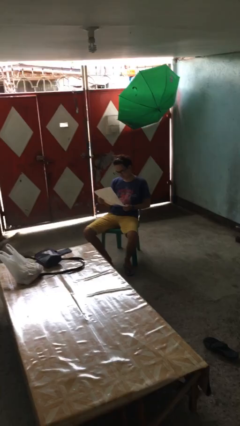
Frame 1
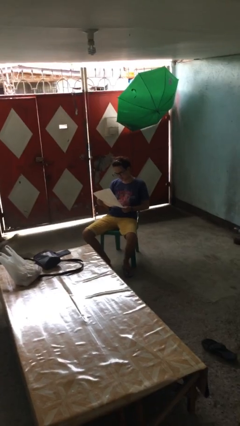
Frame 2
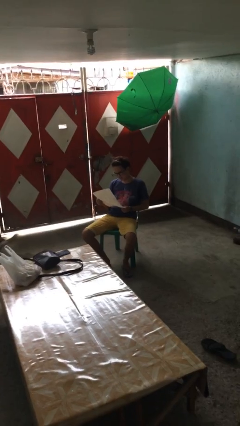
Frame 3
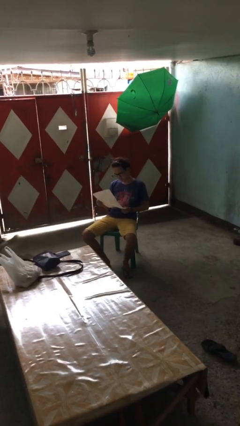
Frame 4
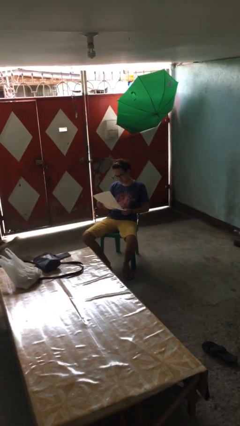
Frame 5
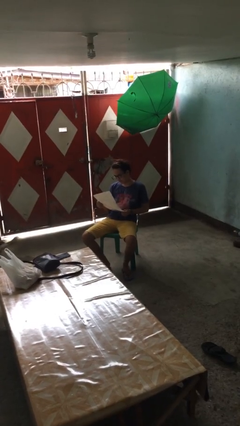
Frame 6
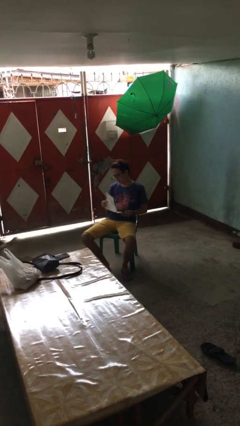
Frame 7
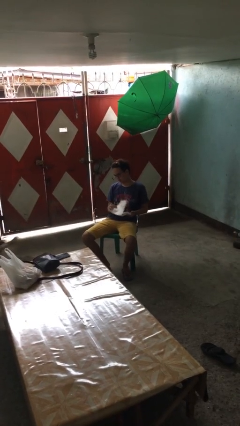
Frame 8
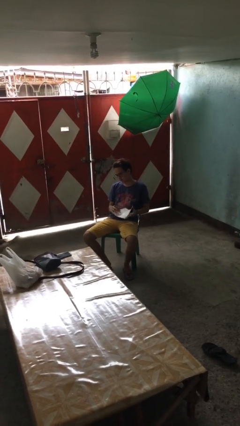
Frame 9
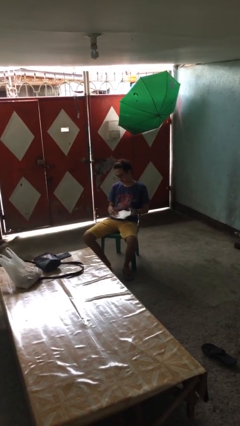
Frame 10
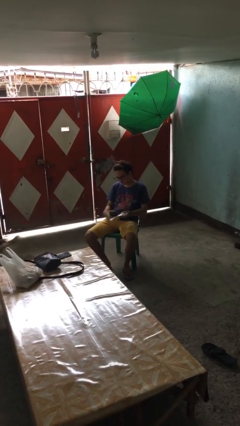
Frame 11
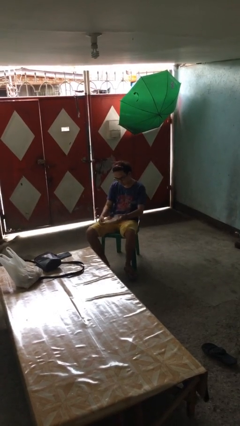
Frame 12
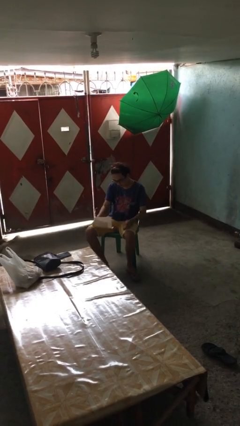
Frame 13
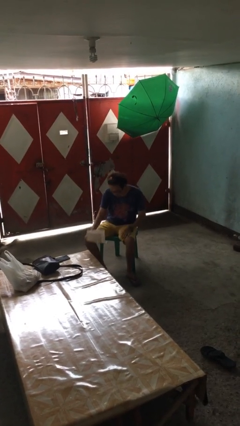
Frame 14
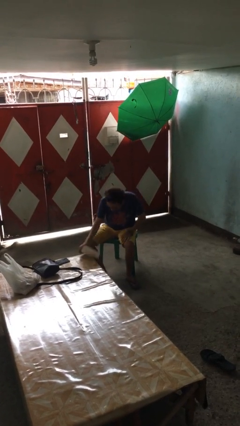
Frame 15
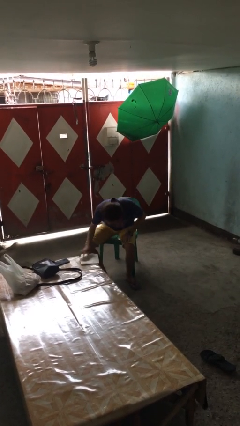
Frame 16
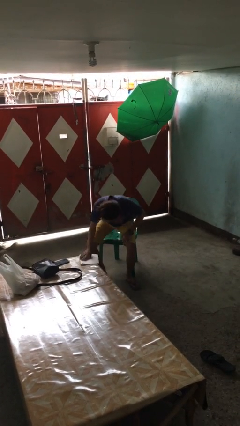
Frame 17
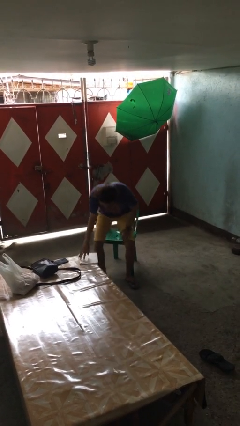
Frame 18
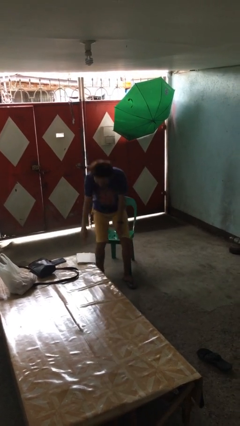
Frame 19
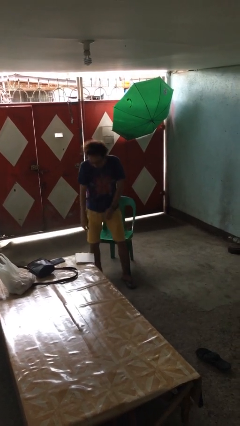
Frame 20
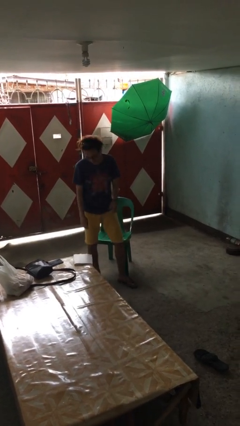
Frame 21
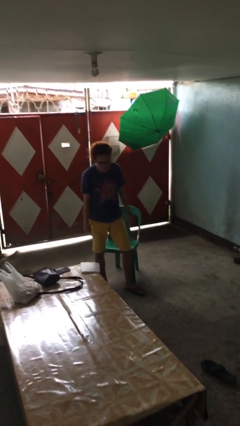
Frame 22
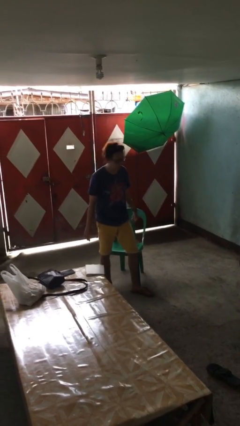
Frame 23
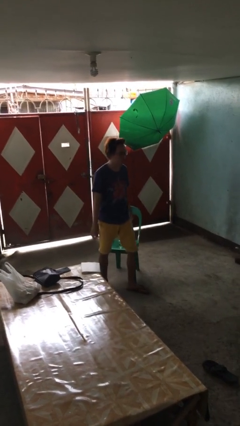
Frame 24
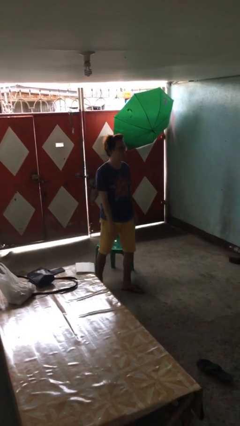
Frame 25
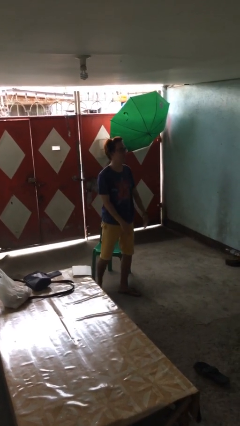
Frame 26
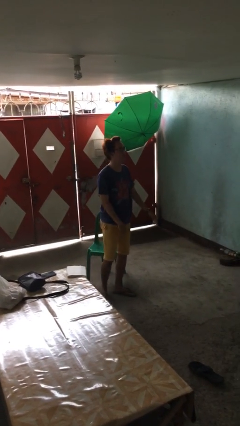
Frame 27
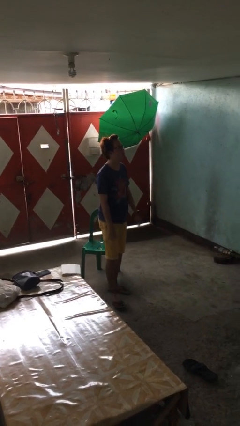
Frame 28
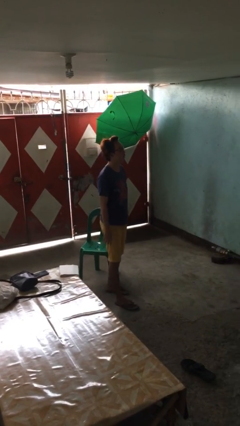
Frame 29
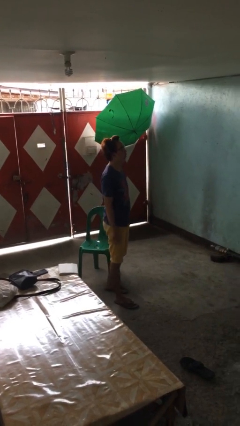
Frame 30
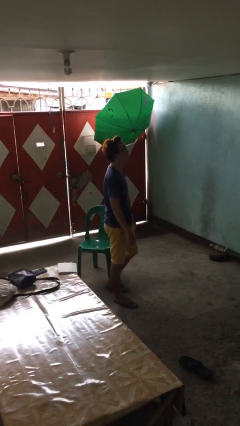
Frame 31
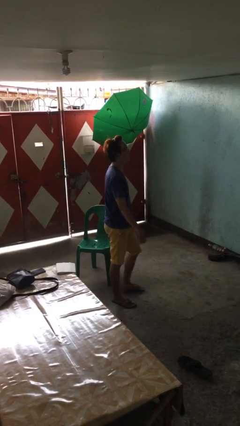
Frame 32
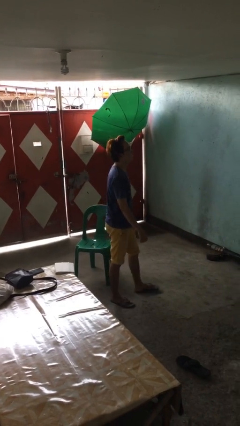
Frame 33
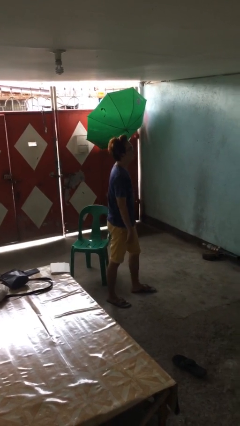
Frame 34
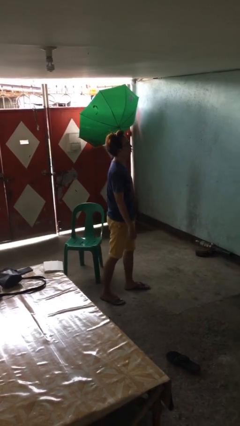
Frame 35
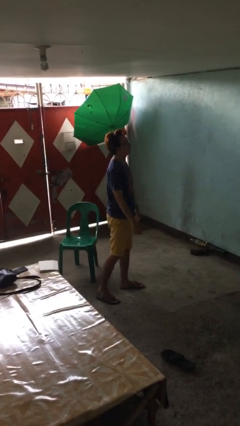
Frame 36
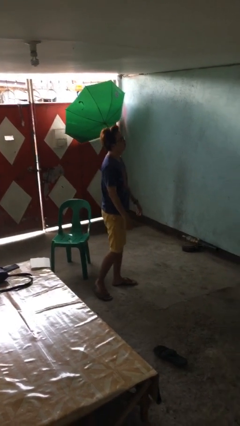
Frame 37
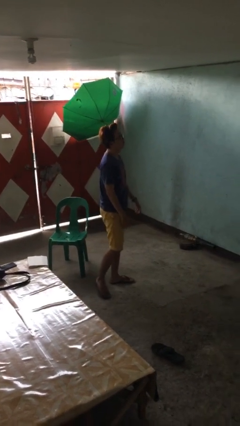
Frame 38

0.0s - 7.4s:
person stands up

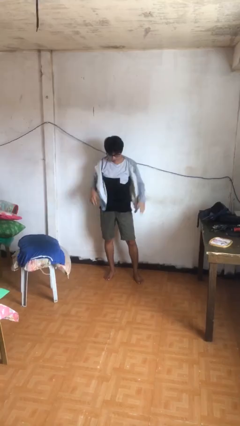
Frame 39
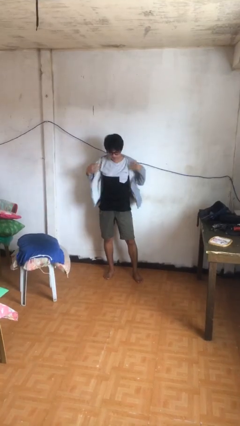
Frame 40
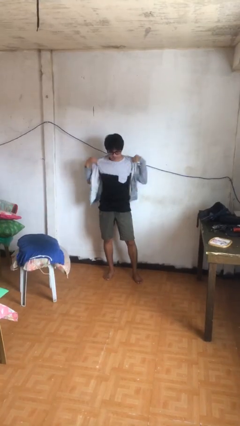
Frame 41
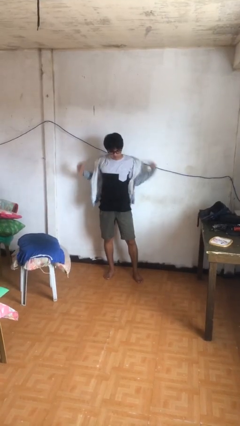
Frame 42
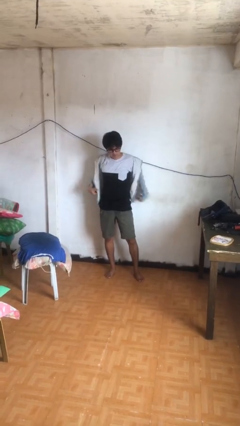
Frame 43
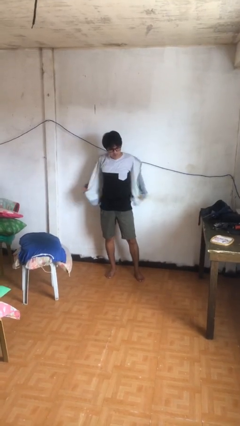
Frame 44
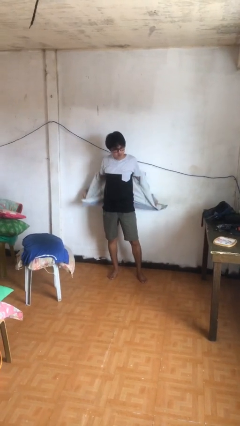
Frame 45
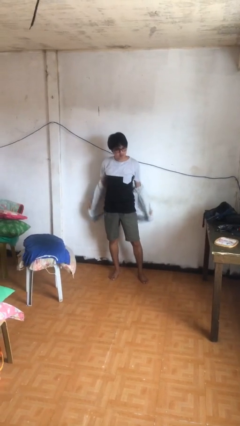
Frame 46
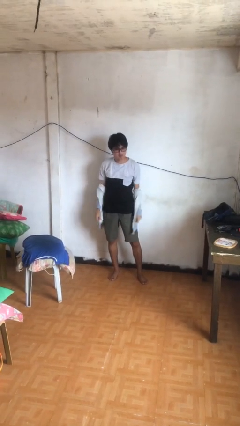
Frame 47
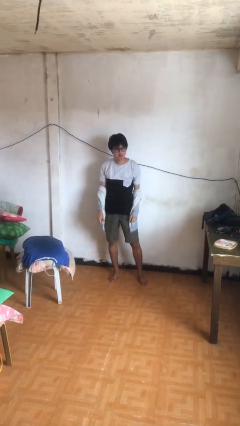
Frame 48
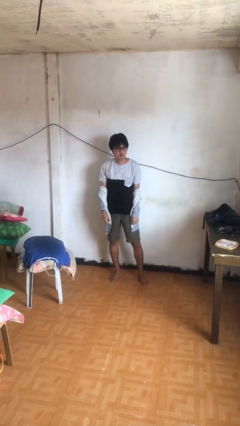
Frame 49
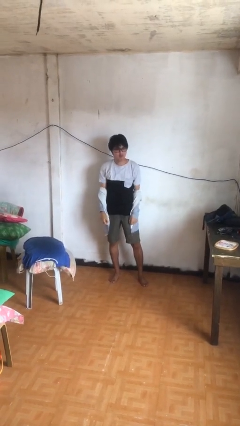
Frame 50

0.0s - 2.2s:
person takes off jacket

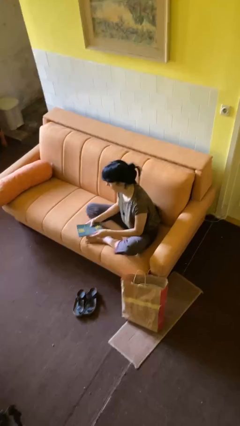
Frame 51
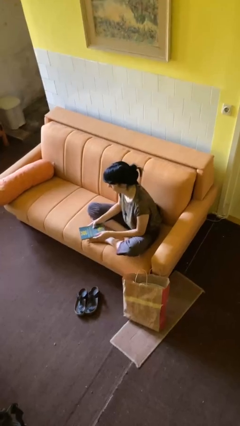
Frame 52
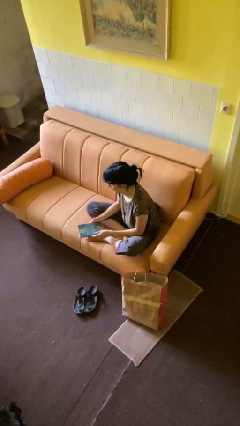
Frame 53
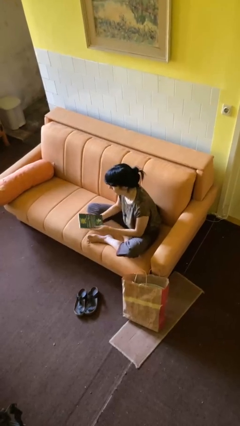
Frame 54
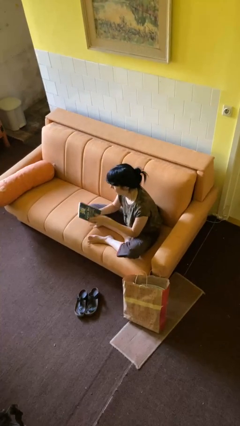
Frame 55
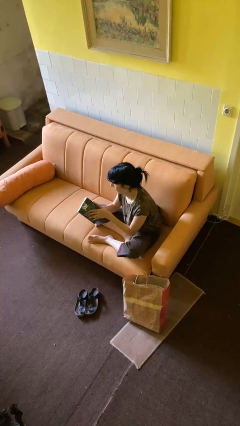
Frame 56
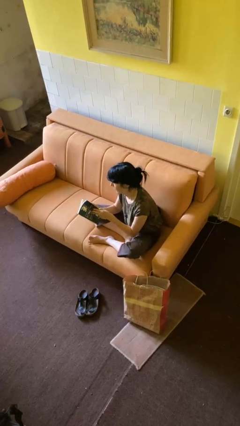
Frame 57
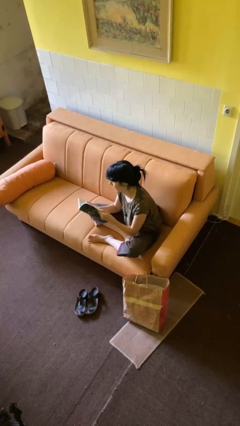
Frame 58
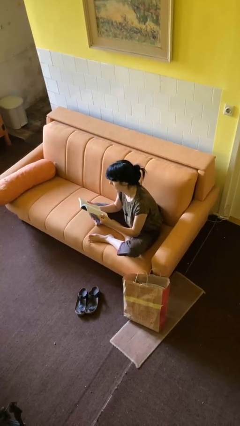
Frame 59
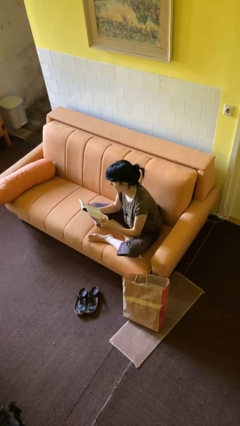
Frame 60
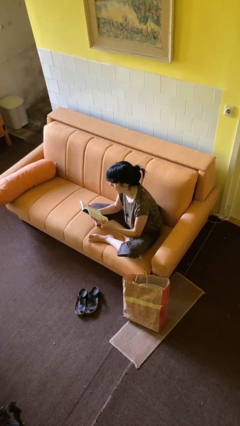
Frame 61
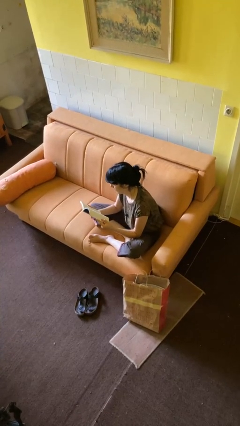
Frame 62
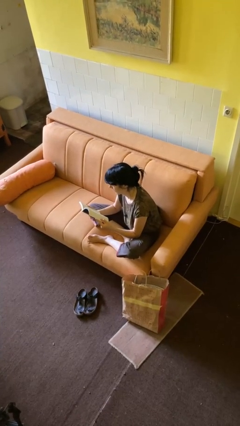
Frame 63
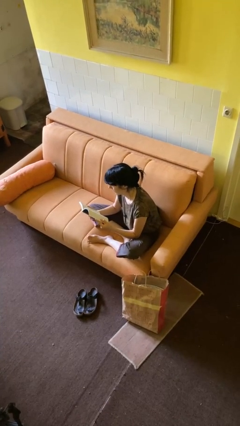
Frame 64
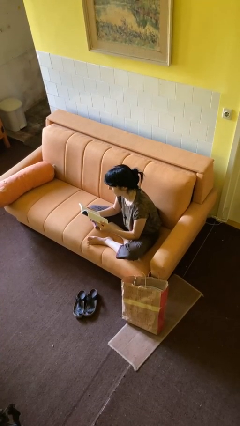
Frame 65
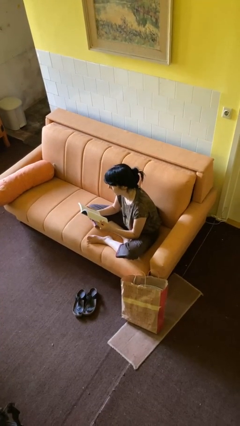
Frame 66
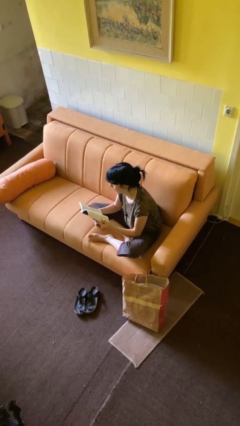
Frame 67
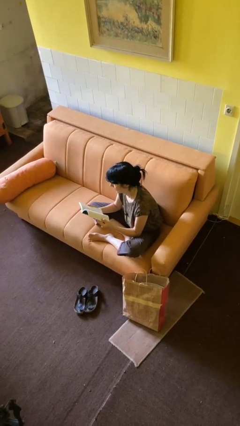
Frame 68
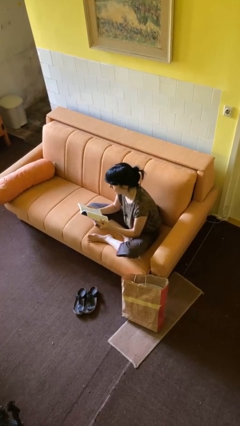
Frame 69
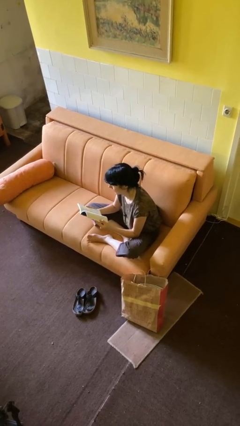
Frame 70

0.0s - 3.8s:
person reads book

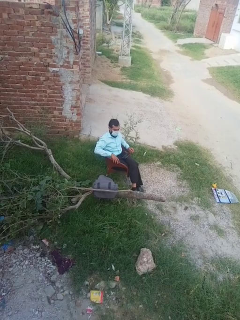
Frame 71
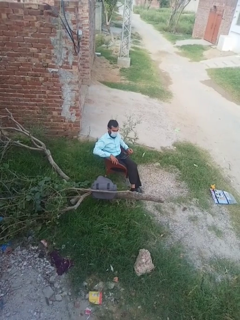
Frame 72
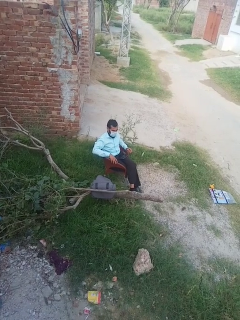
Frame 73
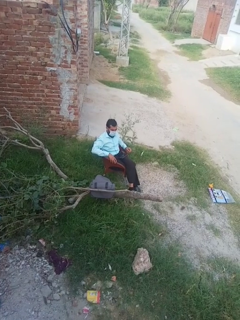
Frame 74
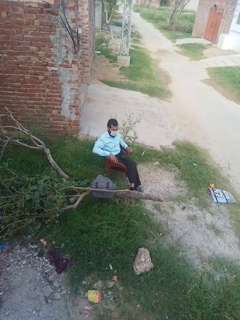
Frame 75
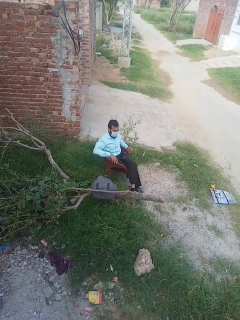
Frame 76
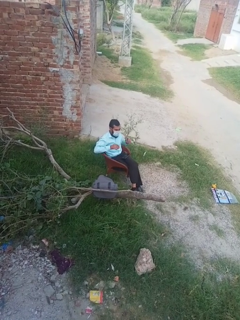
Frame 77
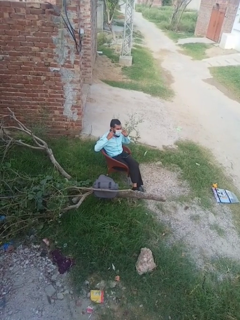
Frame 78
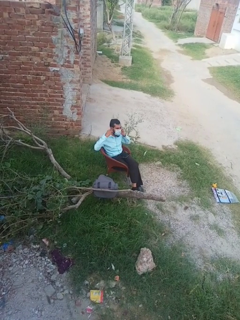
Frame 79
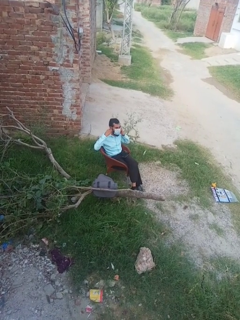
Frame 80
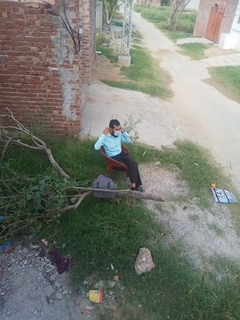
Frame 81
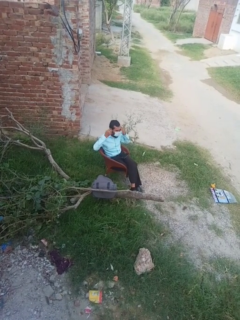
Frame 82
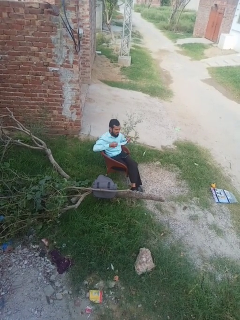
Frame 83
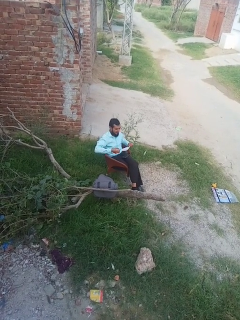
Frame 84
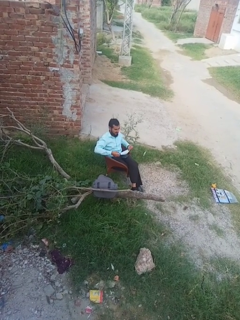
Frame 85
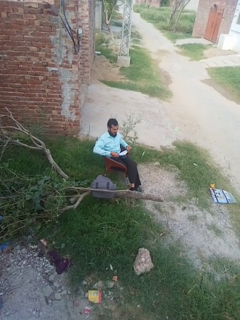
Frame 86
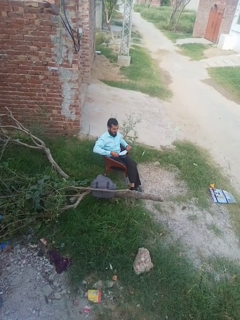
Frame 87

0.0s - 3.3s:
person takes off facemask

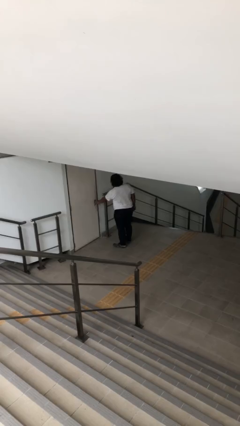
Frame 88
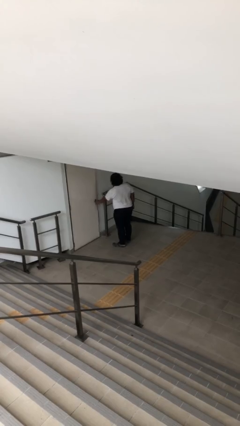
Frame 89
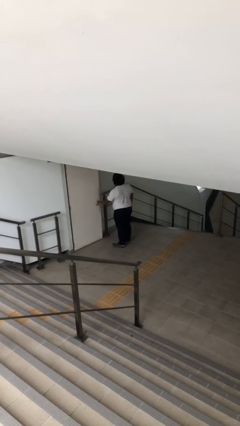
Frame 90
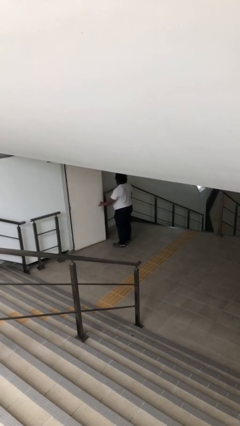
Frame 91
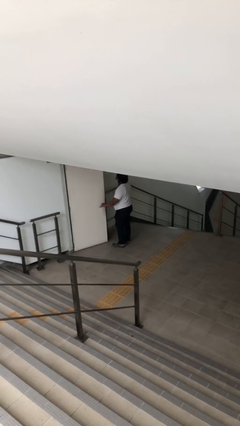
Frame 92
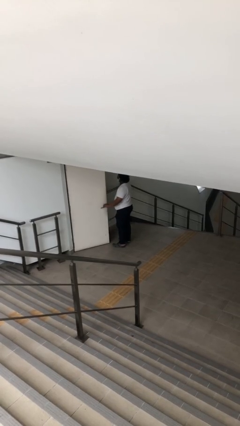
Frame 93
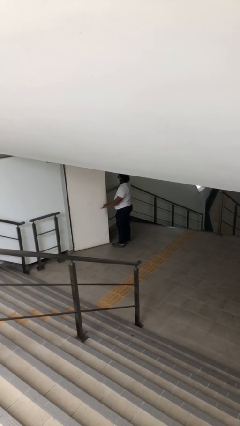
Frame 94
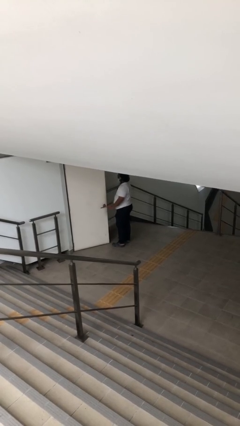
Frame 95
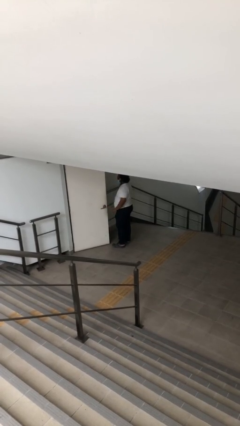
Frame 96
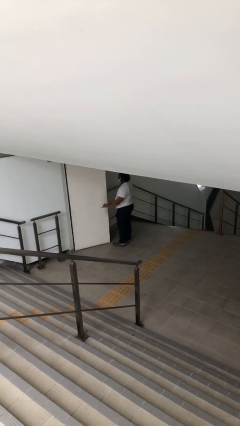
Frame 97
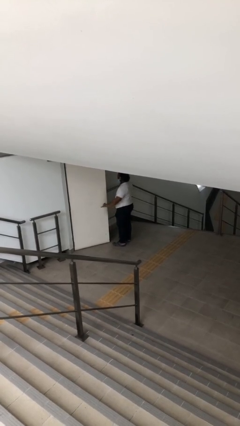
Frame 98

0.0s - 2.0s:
person opens facility door
